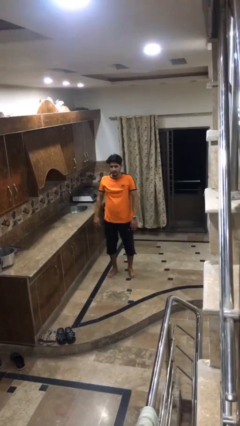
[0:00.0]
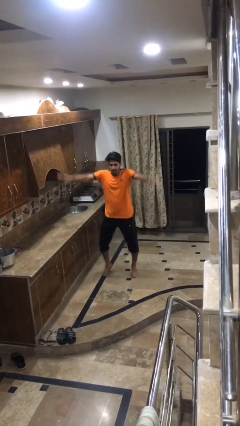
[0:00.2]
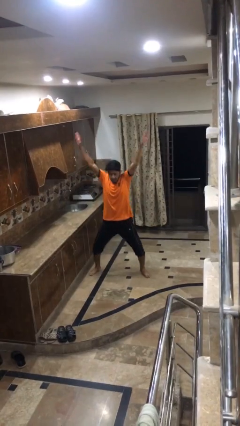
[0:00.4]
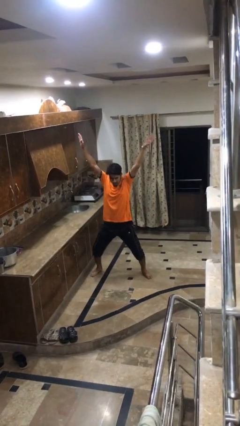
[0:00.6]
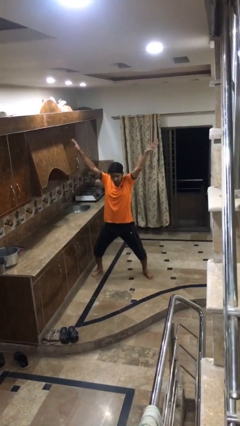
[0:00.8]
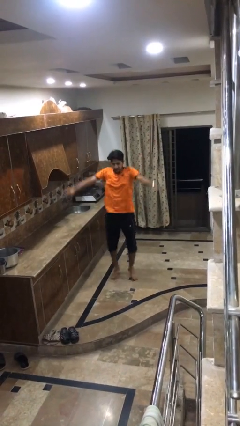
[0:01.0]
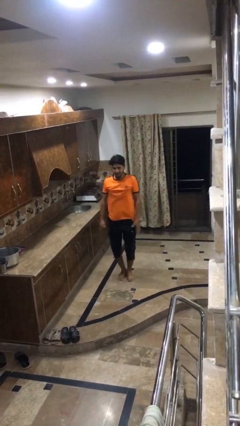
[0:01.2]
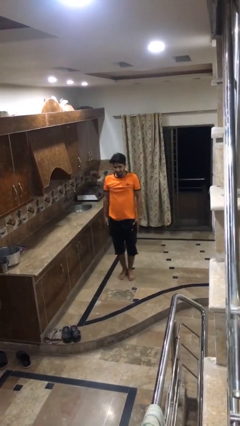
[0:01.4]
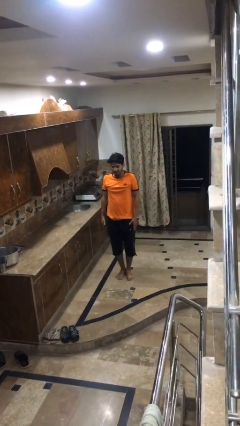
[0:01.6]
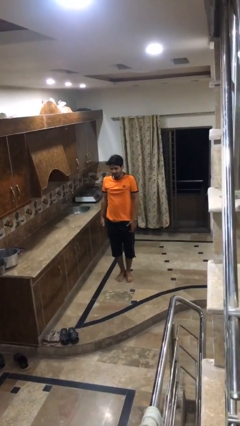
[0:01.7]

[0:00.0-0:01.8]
person exercises with jumping jacks

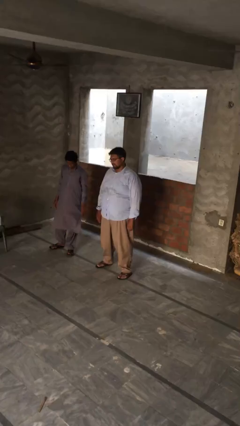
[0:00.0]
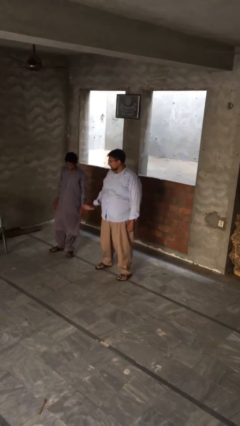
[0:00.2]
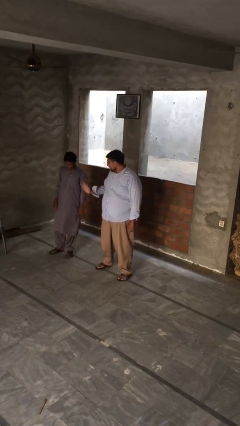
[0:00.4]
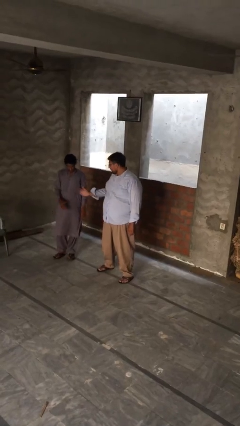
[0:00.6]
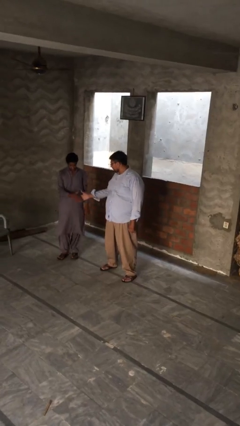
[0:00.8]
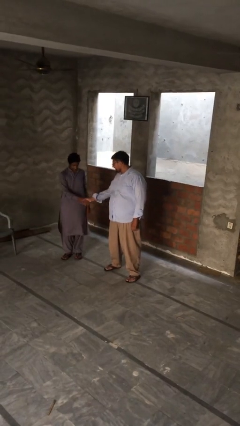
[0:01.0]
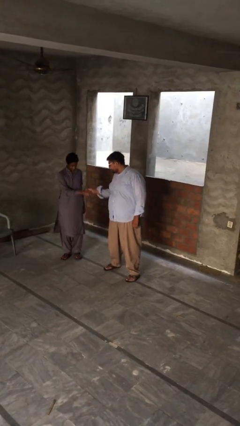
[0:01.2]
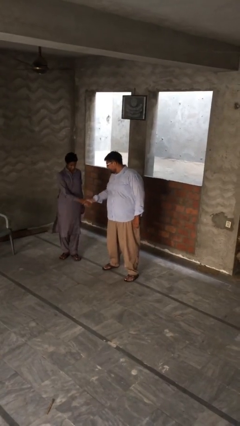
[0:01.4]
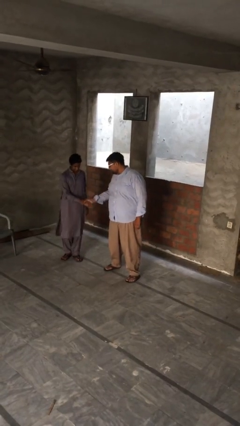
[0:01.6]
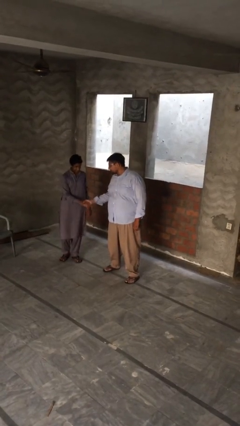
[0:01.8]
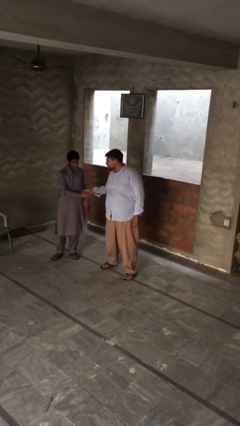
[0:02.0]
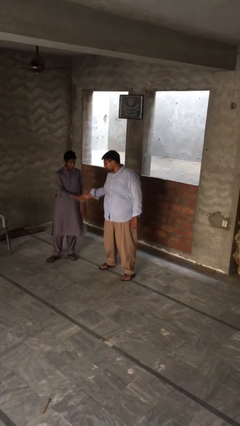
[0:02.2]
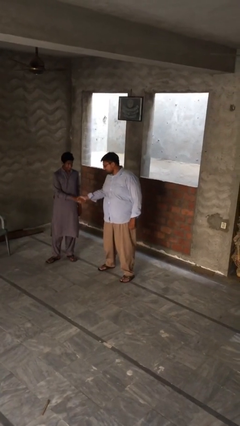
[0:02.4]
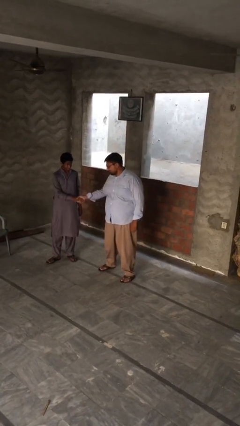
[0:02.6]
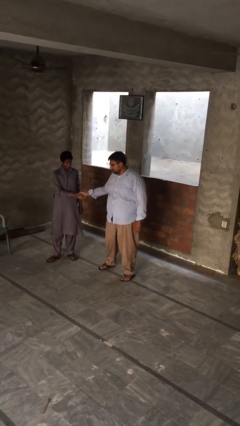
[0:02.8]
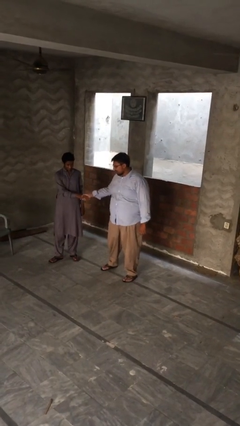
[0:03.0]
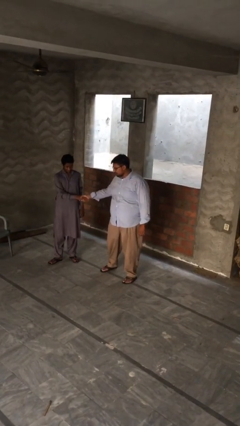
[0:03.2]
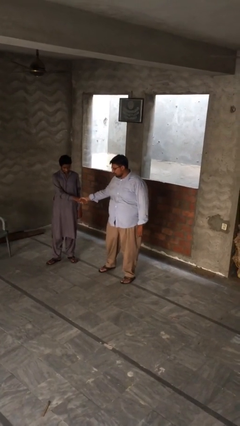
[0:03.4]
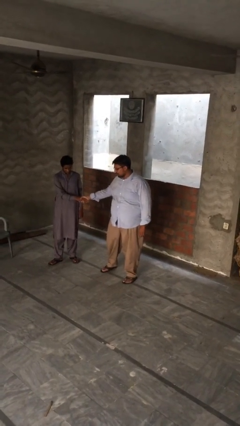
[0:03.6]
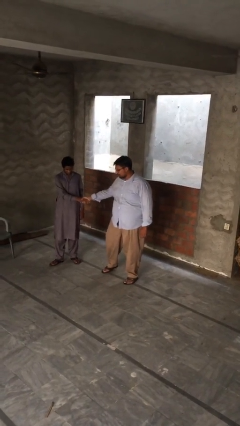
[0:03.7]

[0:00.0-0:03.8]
person shakes hand

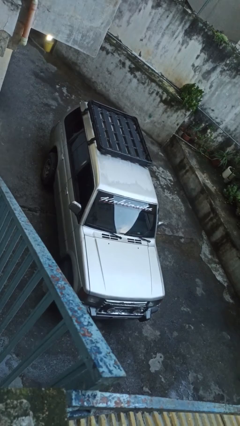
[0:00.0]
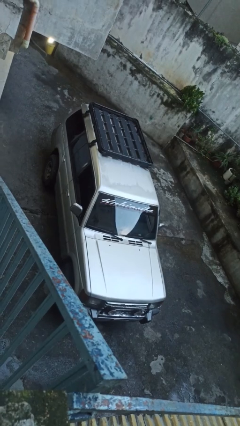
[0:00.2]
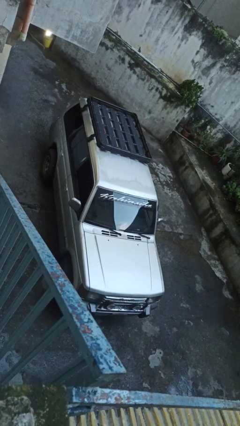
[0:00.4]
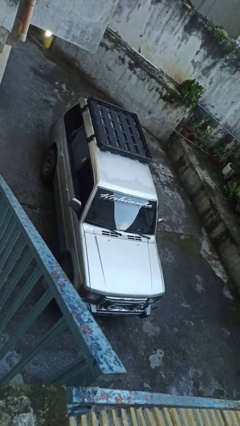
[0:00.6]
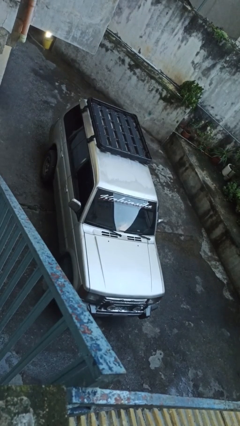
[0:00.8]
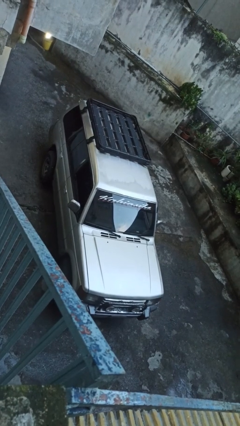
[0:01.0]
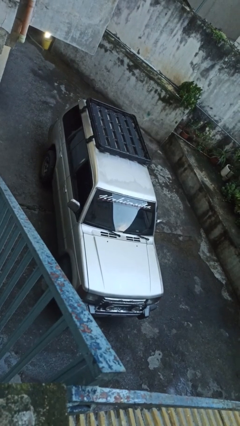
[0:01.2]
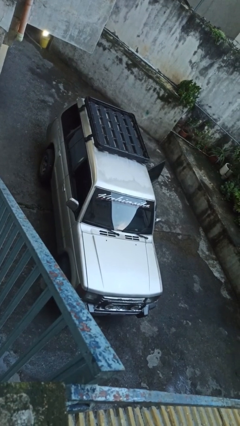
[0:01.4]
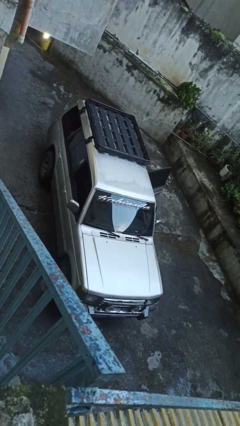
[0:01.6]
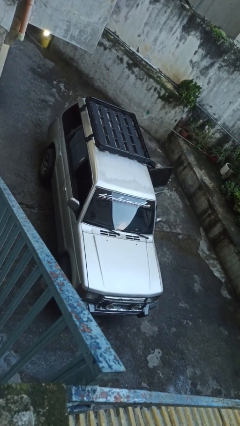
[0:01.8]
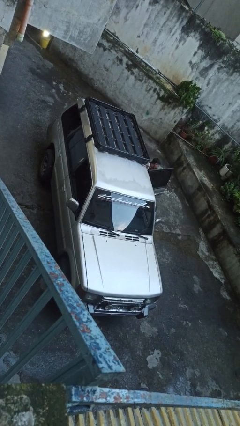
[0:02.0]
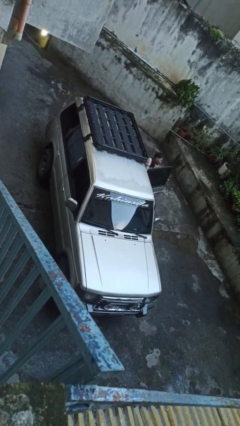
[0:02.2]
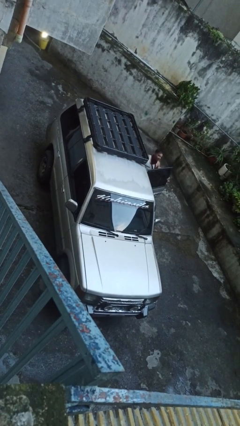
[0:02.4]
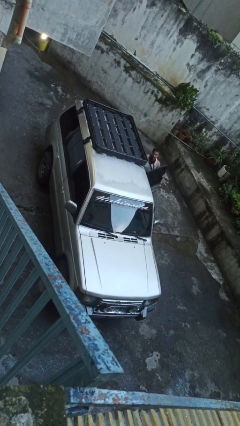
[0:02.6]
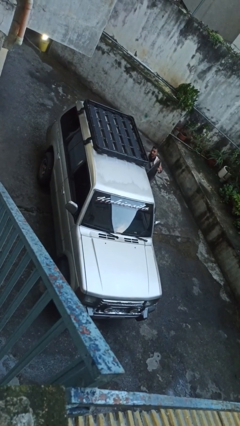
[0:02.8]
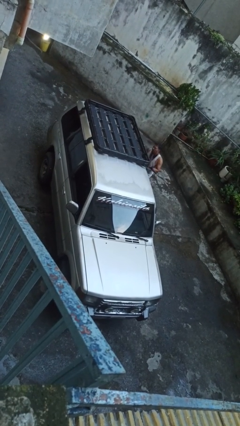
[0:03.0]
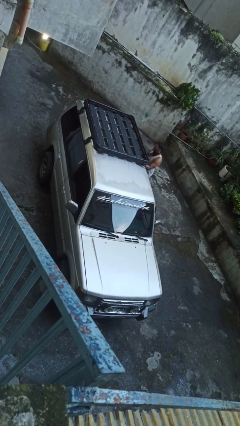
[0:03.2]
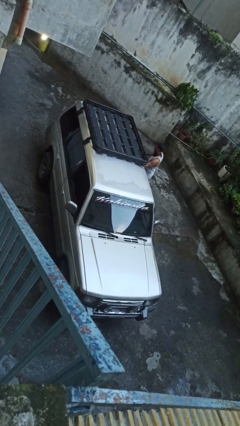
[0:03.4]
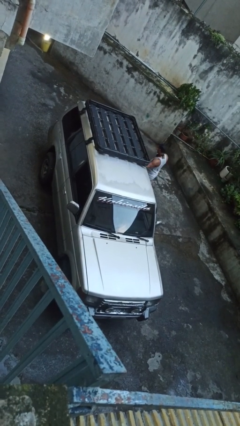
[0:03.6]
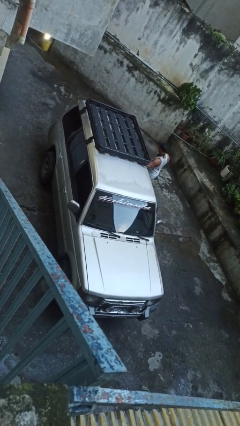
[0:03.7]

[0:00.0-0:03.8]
car drops off person

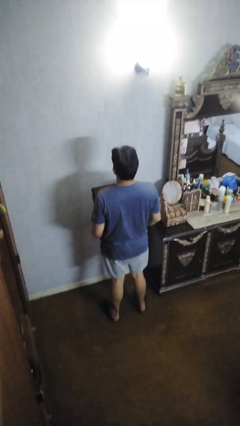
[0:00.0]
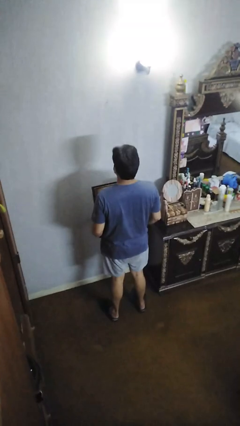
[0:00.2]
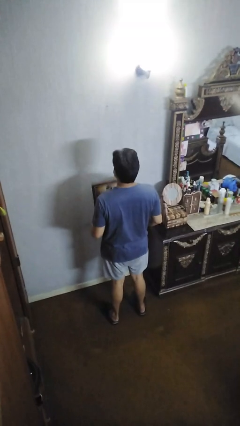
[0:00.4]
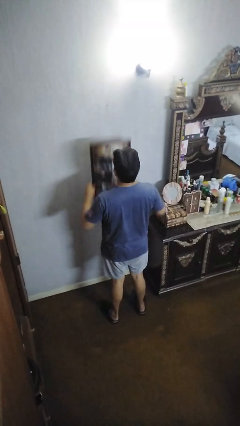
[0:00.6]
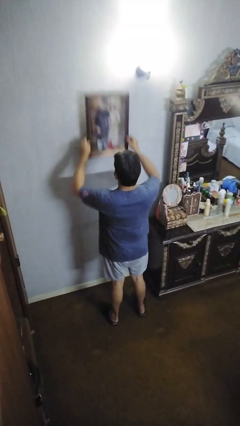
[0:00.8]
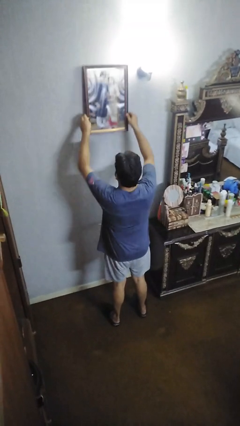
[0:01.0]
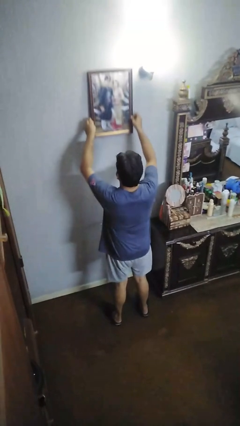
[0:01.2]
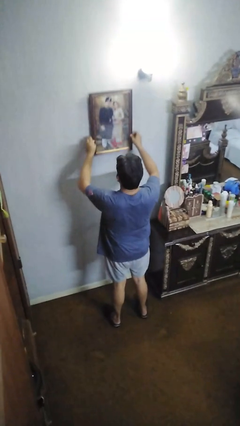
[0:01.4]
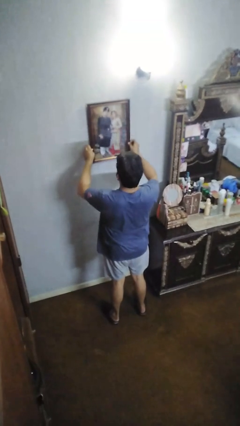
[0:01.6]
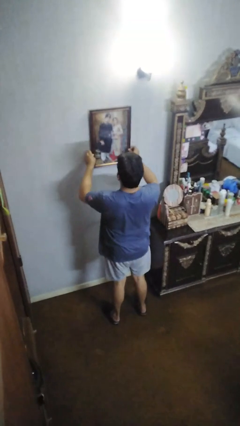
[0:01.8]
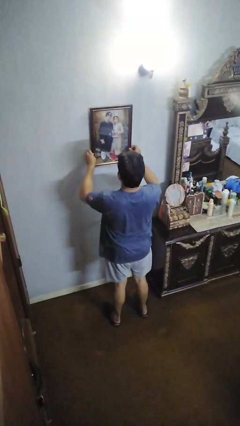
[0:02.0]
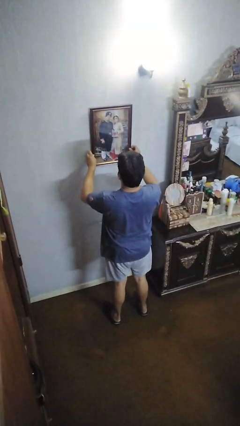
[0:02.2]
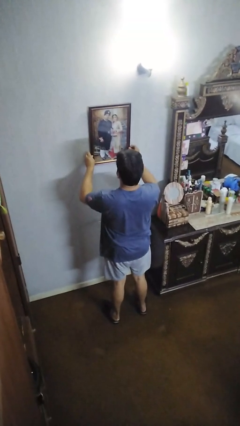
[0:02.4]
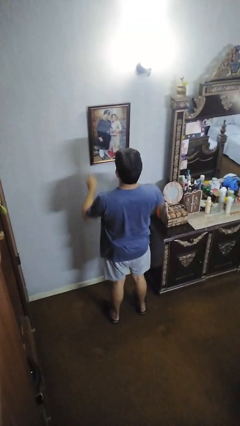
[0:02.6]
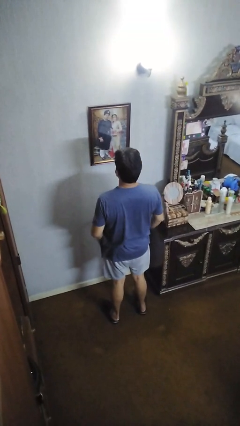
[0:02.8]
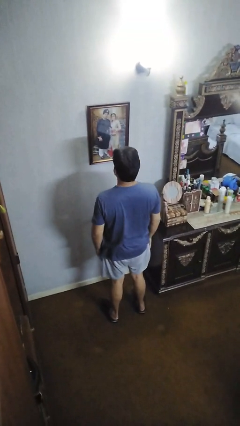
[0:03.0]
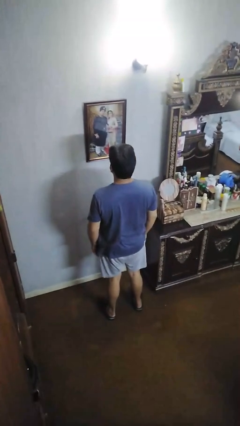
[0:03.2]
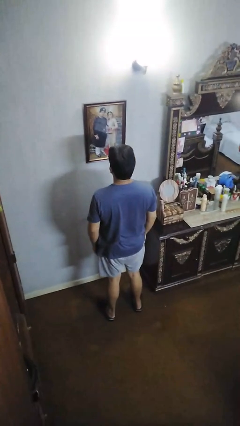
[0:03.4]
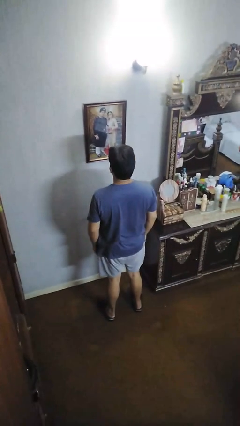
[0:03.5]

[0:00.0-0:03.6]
person puts up picture frame

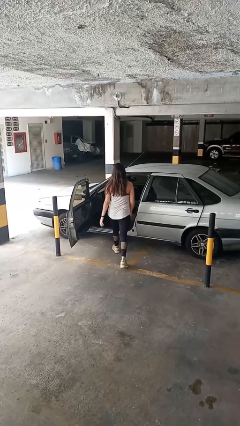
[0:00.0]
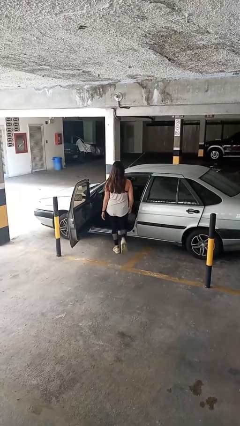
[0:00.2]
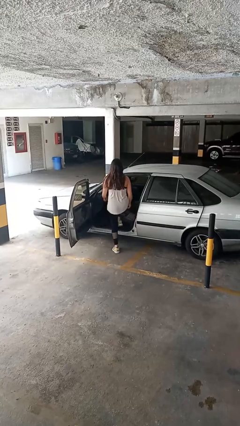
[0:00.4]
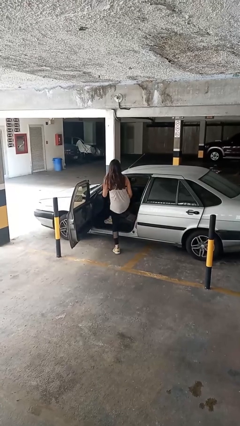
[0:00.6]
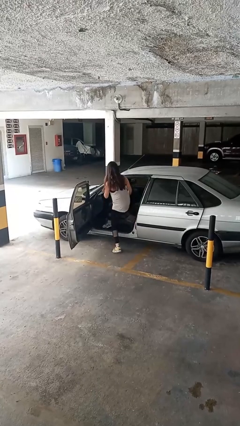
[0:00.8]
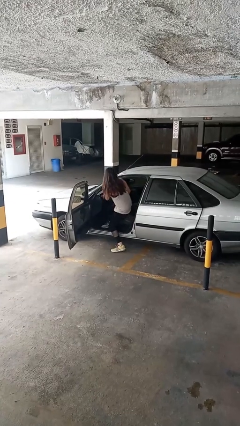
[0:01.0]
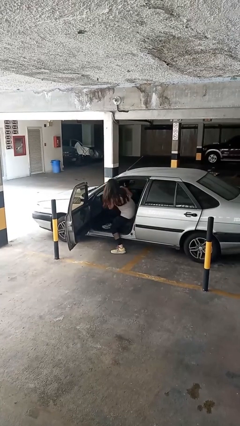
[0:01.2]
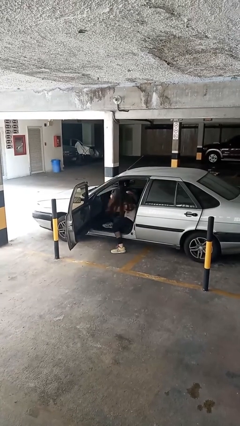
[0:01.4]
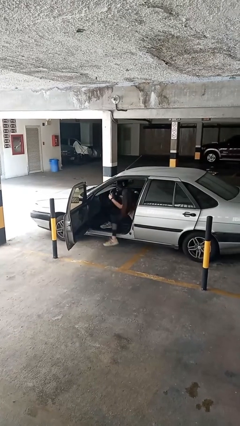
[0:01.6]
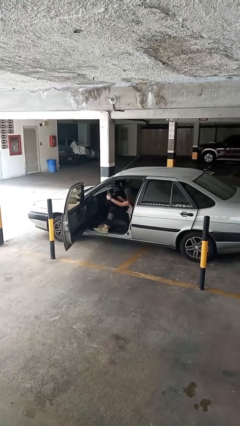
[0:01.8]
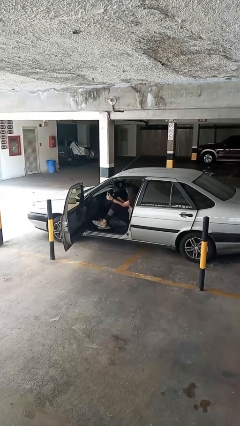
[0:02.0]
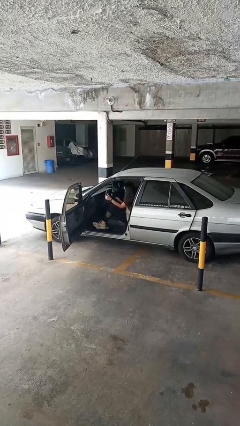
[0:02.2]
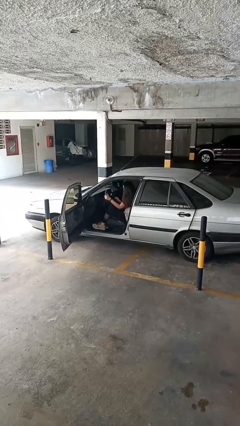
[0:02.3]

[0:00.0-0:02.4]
person enters car

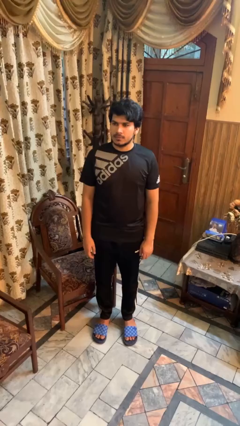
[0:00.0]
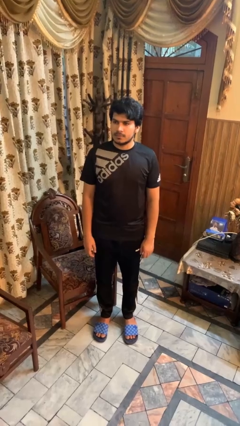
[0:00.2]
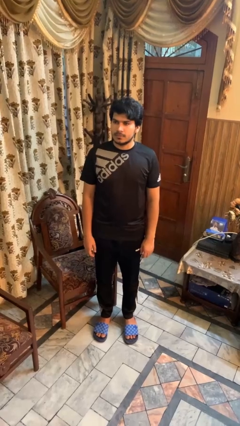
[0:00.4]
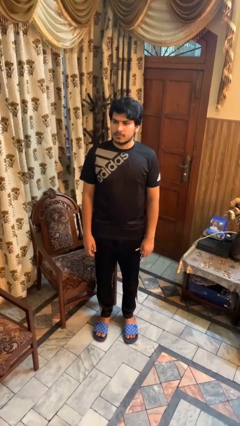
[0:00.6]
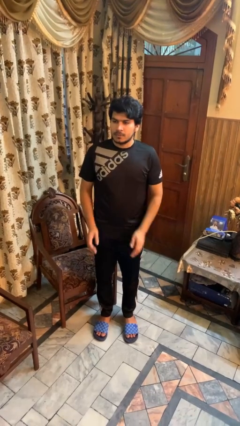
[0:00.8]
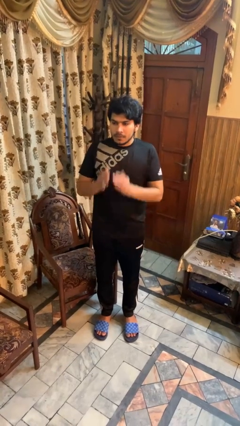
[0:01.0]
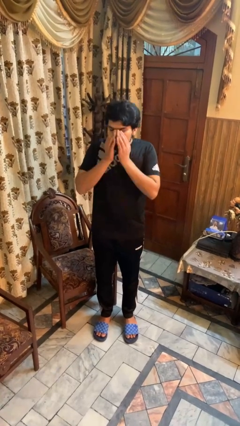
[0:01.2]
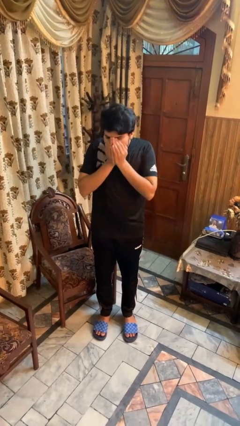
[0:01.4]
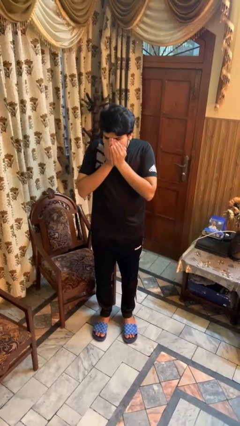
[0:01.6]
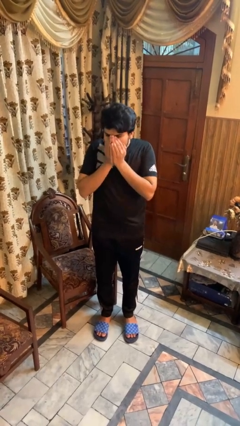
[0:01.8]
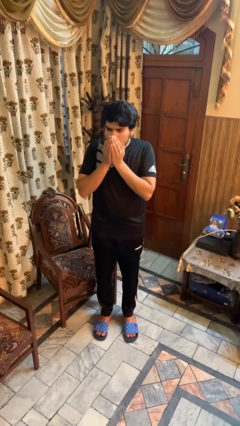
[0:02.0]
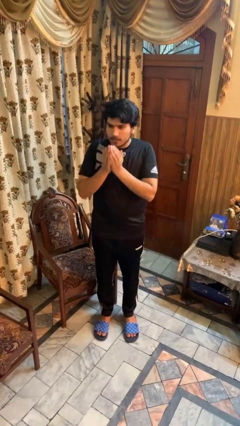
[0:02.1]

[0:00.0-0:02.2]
person sneezes into hand
